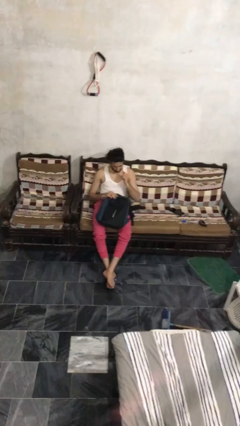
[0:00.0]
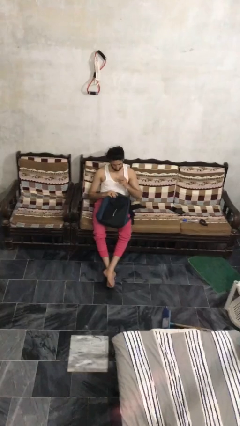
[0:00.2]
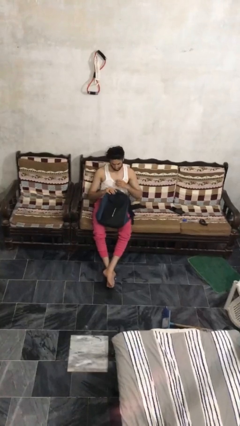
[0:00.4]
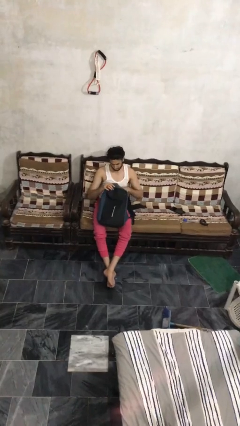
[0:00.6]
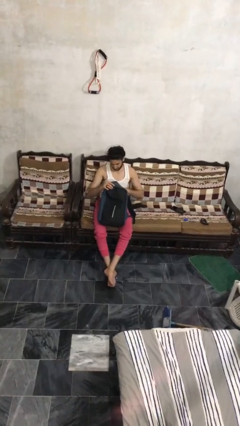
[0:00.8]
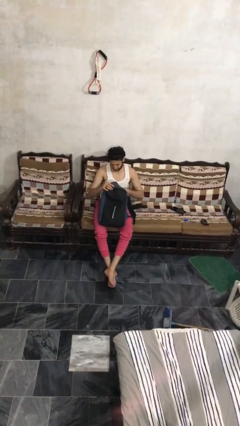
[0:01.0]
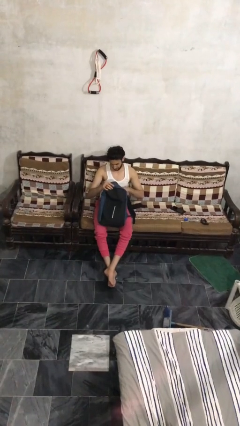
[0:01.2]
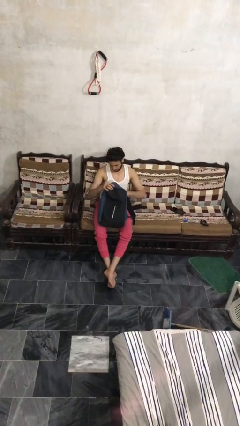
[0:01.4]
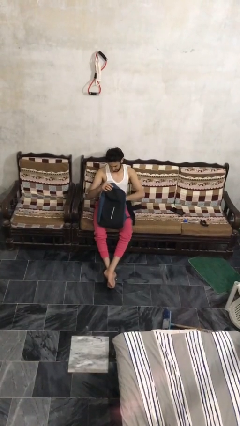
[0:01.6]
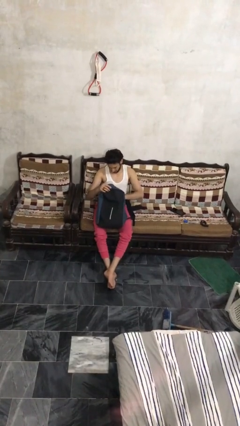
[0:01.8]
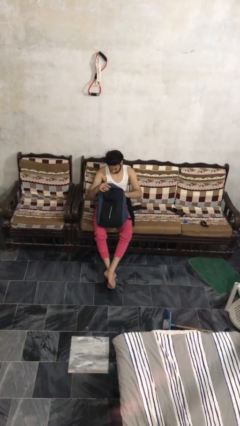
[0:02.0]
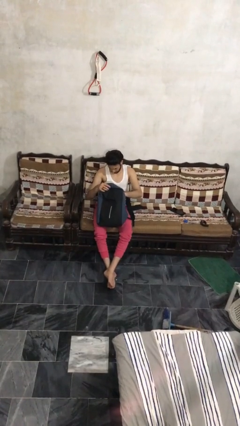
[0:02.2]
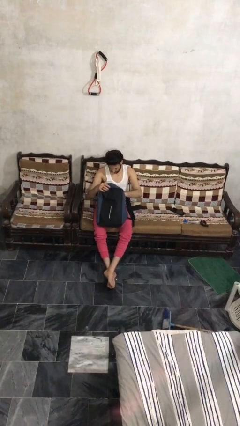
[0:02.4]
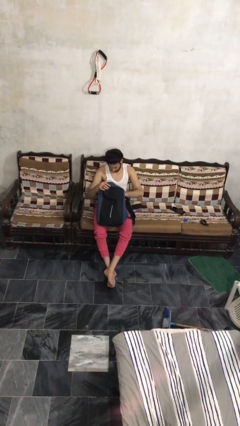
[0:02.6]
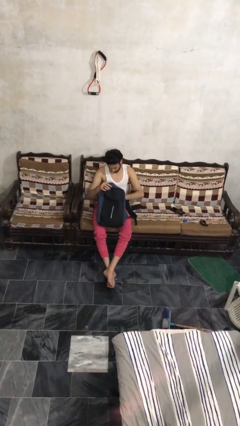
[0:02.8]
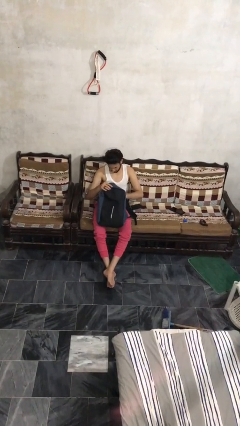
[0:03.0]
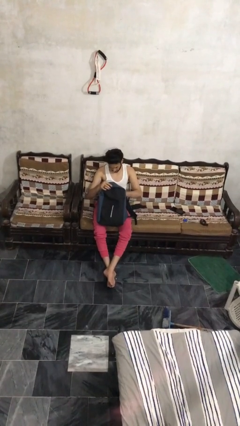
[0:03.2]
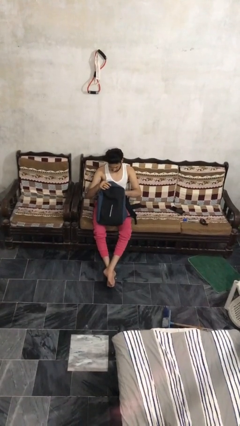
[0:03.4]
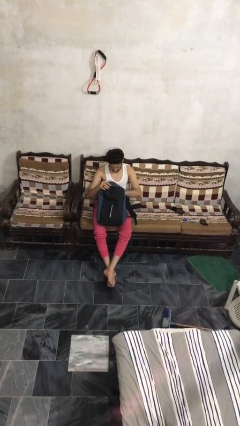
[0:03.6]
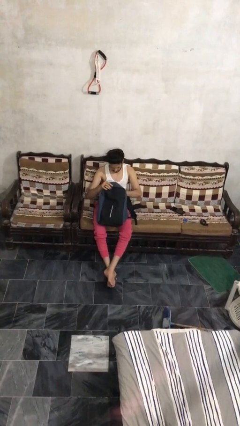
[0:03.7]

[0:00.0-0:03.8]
person searches in backpack

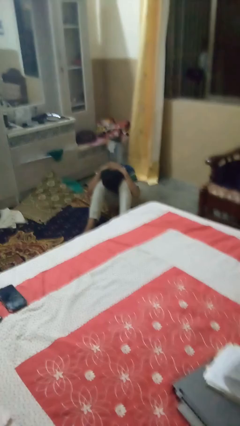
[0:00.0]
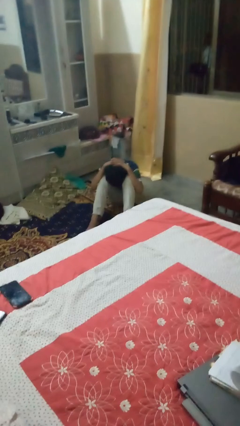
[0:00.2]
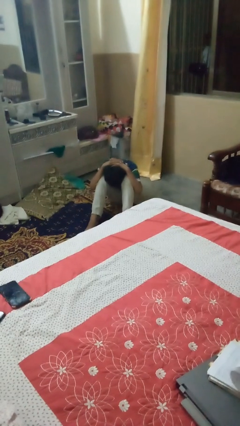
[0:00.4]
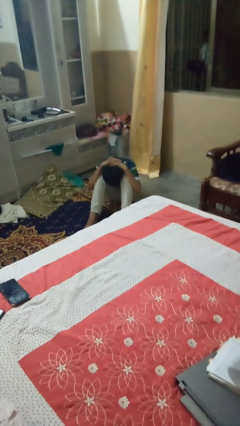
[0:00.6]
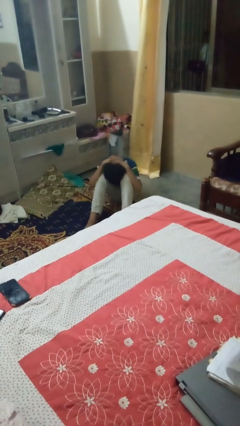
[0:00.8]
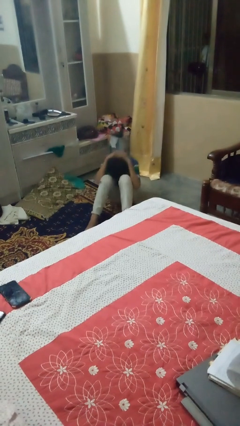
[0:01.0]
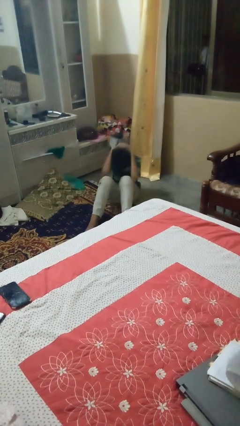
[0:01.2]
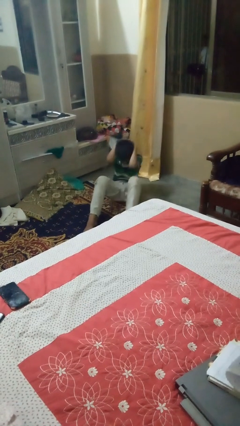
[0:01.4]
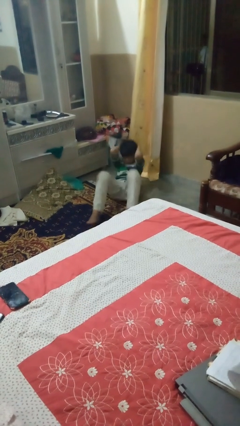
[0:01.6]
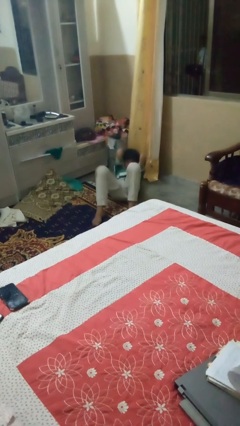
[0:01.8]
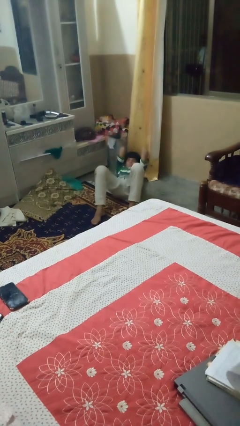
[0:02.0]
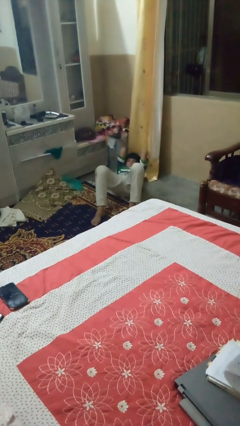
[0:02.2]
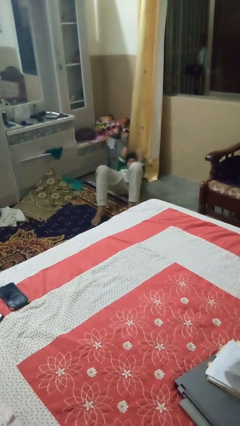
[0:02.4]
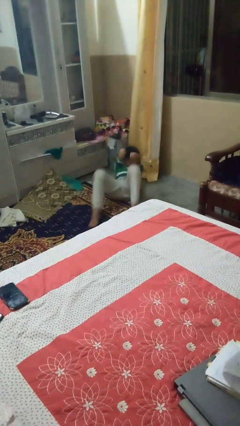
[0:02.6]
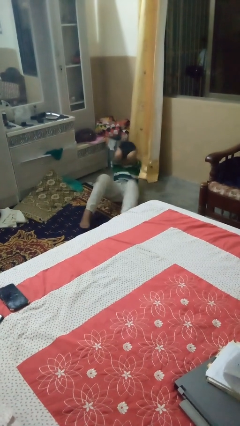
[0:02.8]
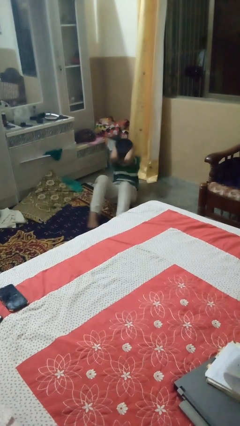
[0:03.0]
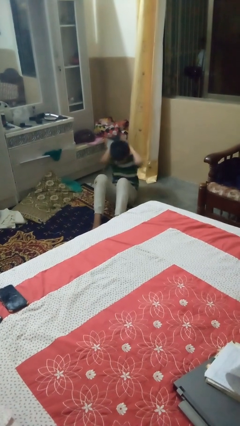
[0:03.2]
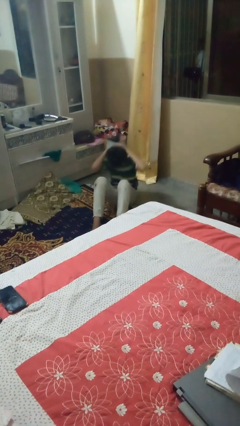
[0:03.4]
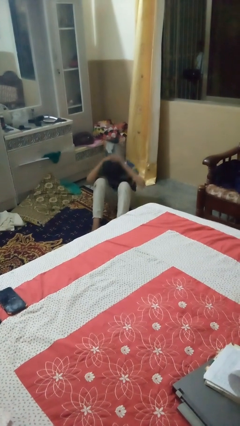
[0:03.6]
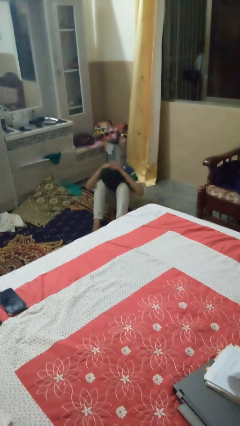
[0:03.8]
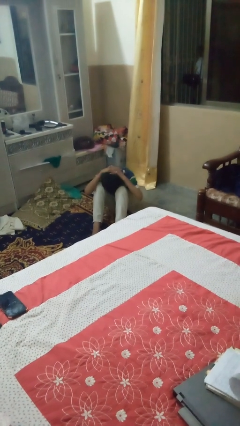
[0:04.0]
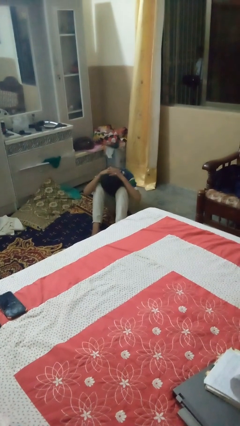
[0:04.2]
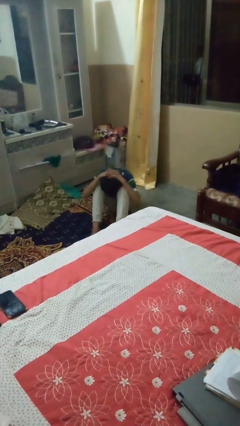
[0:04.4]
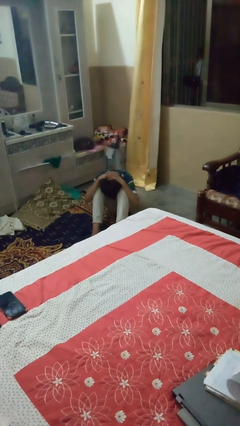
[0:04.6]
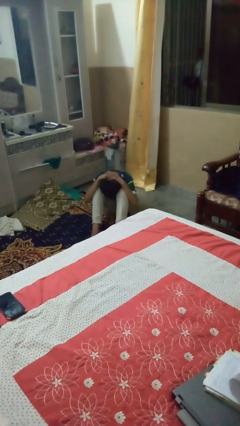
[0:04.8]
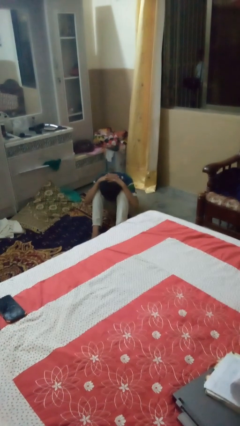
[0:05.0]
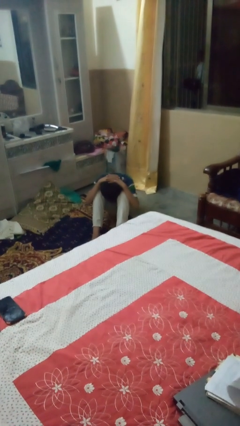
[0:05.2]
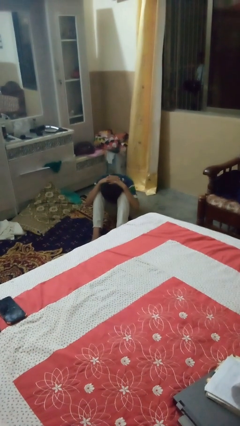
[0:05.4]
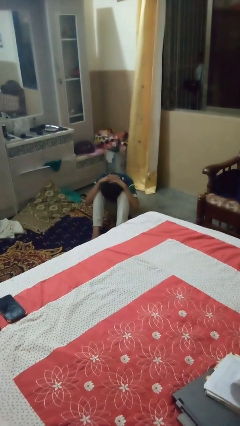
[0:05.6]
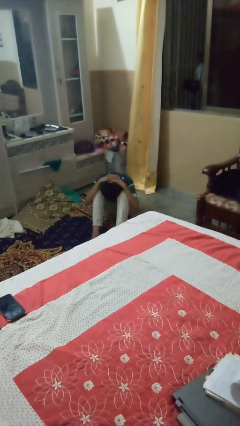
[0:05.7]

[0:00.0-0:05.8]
person exercises with situp

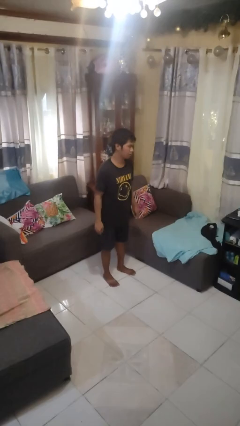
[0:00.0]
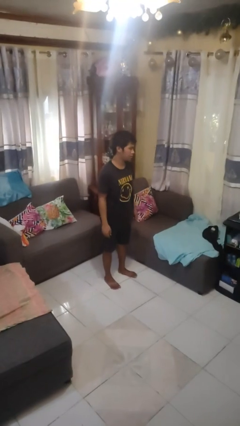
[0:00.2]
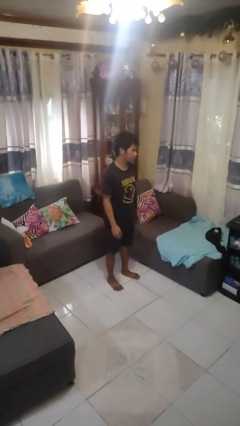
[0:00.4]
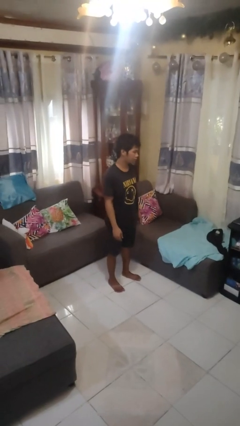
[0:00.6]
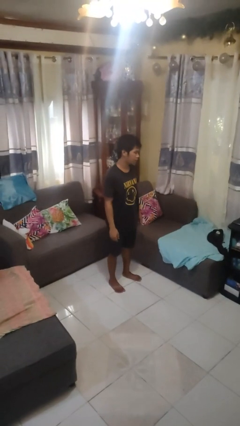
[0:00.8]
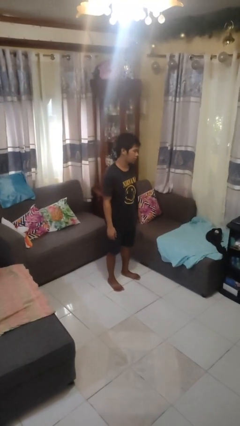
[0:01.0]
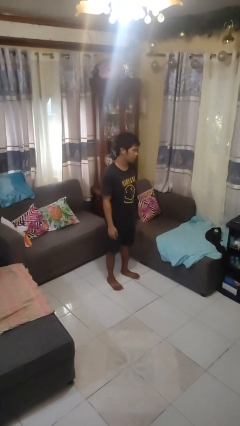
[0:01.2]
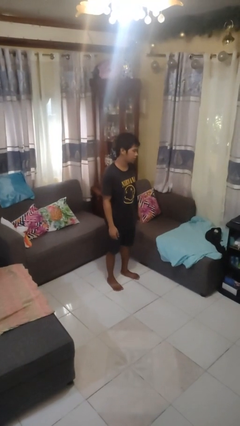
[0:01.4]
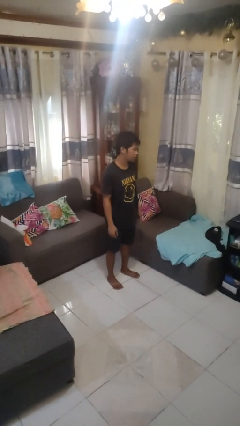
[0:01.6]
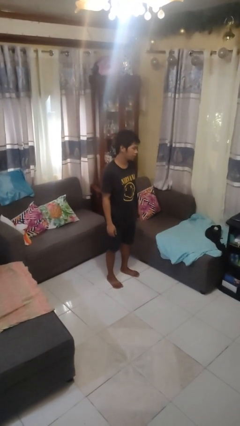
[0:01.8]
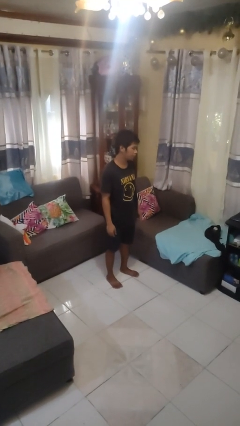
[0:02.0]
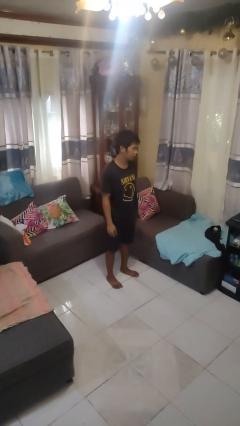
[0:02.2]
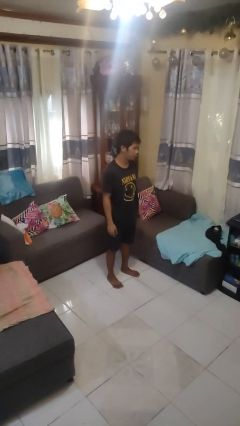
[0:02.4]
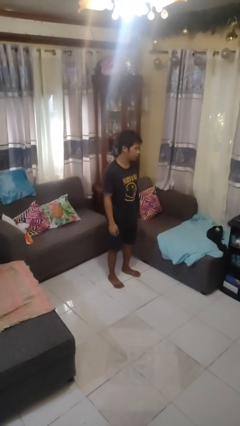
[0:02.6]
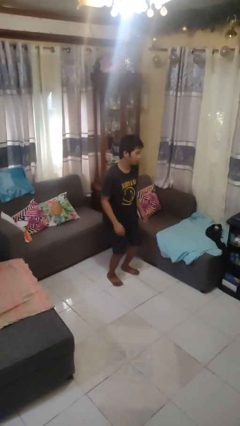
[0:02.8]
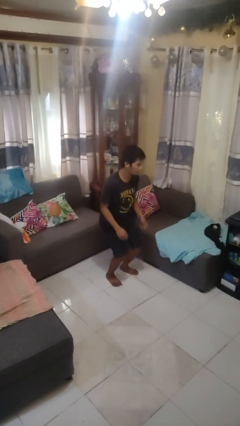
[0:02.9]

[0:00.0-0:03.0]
person stands up

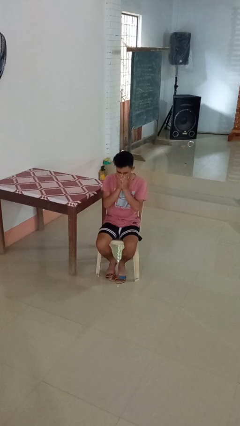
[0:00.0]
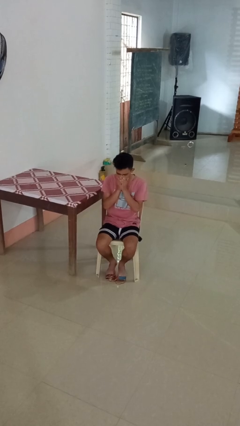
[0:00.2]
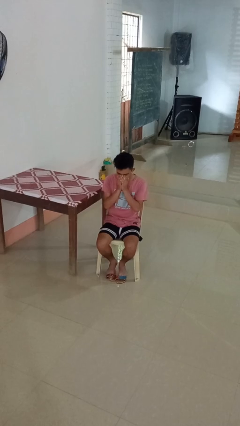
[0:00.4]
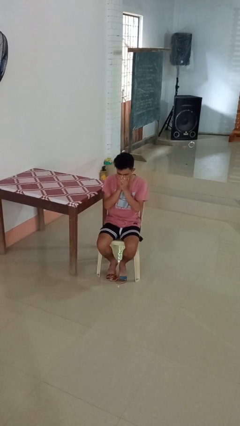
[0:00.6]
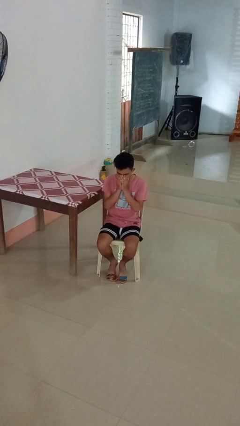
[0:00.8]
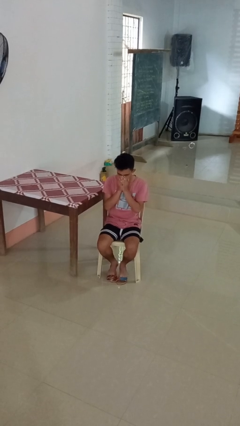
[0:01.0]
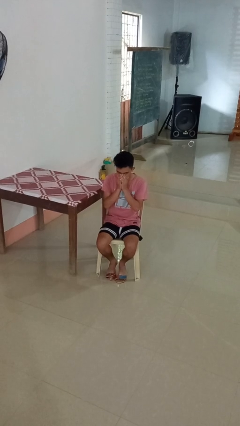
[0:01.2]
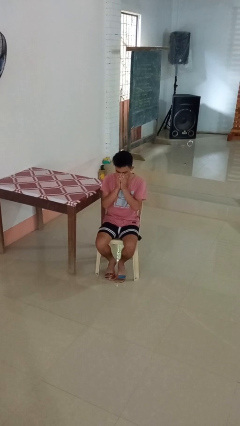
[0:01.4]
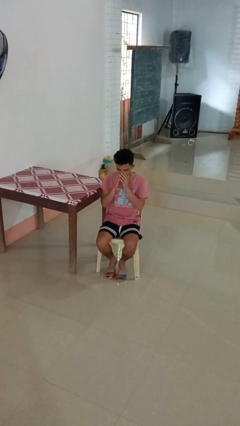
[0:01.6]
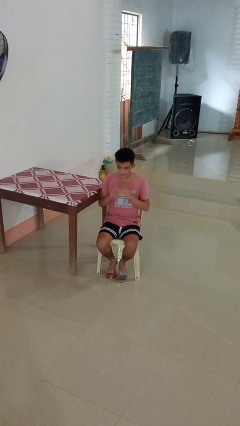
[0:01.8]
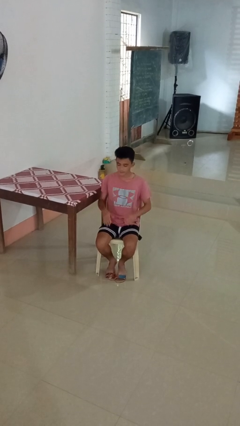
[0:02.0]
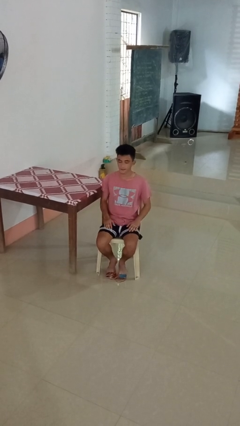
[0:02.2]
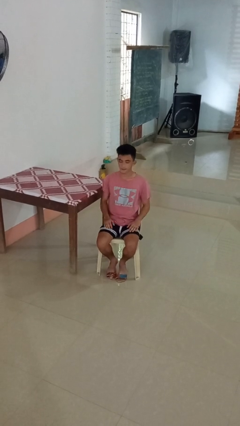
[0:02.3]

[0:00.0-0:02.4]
person sneezes into hand

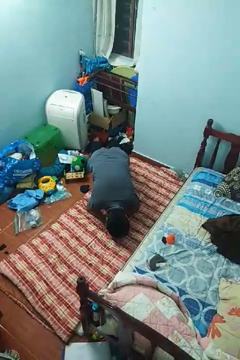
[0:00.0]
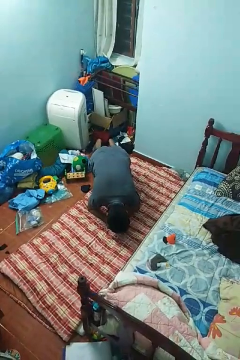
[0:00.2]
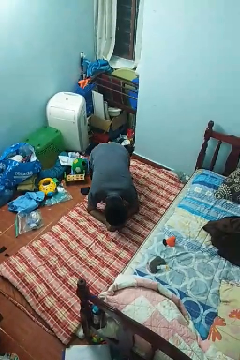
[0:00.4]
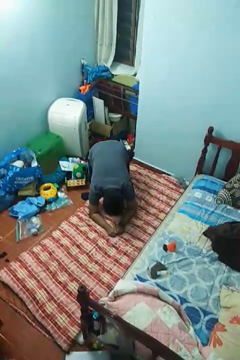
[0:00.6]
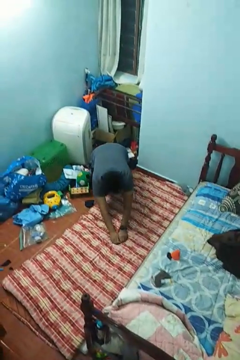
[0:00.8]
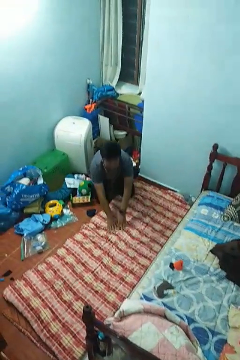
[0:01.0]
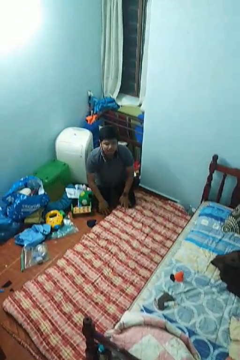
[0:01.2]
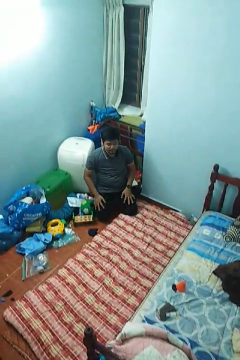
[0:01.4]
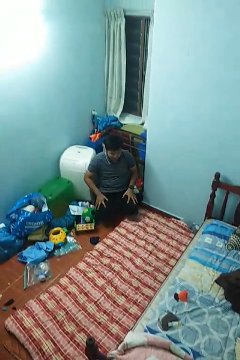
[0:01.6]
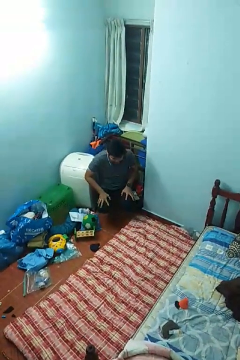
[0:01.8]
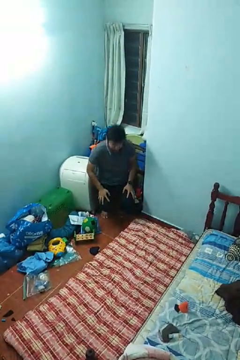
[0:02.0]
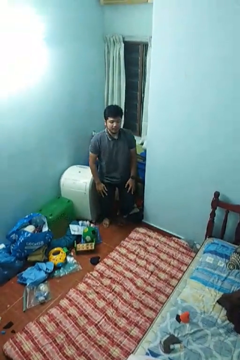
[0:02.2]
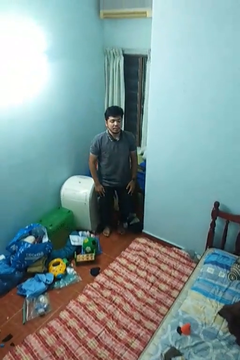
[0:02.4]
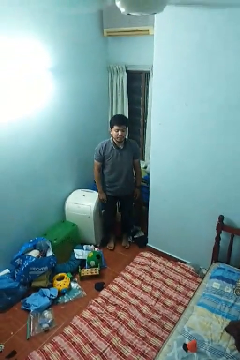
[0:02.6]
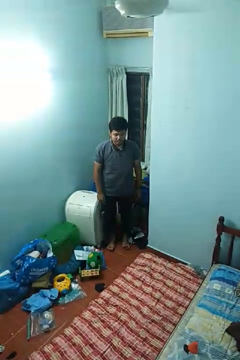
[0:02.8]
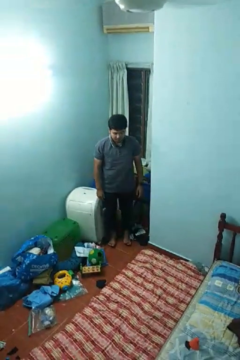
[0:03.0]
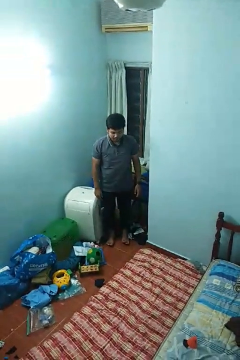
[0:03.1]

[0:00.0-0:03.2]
person stands up from floor
